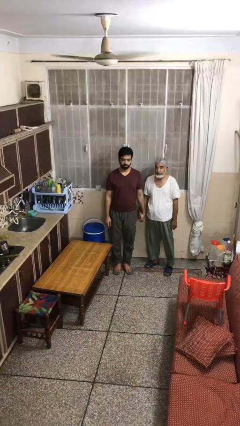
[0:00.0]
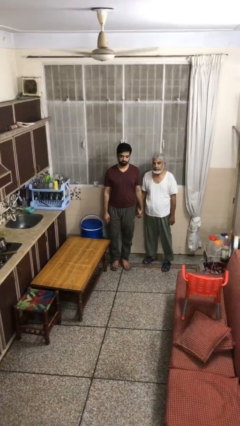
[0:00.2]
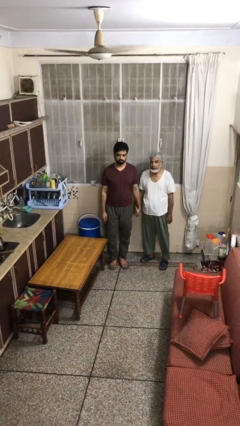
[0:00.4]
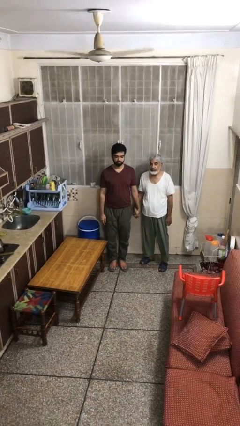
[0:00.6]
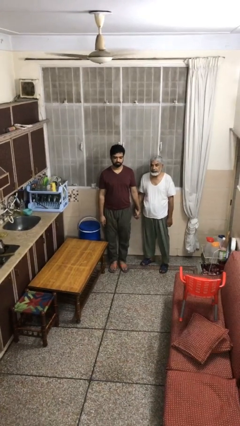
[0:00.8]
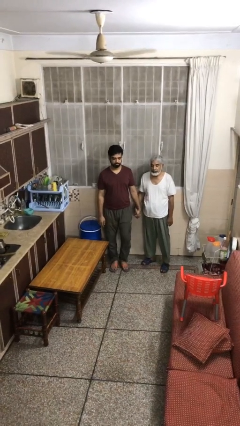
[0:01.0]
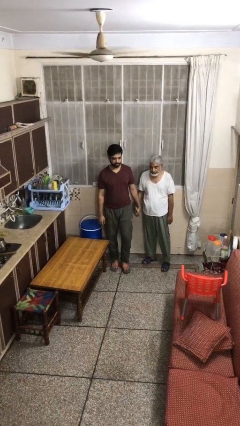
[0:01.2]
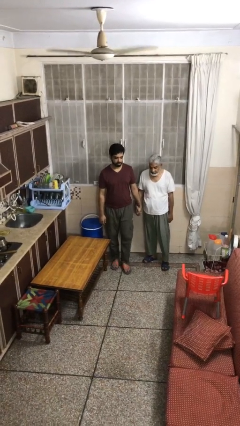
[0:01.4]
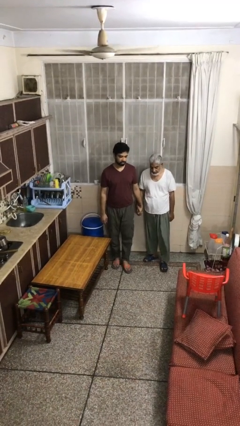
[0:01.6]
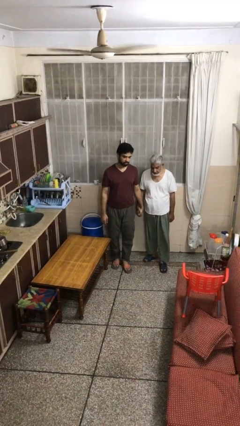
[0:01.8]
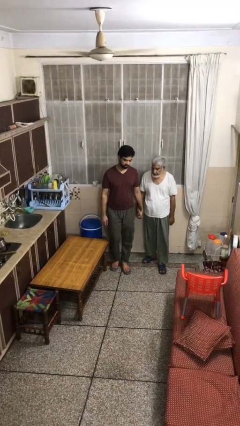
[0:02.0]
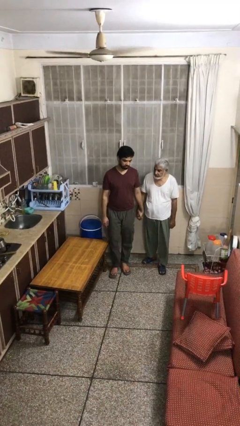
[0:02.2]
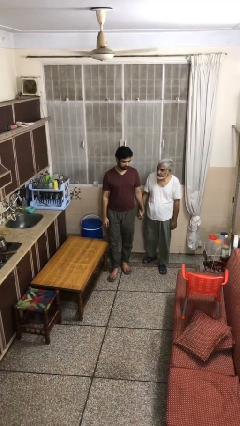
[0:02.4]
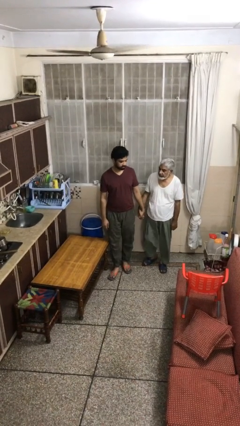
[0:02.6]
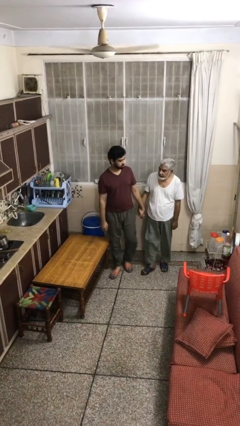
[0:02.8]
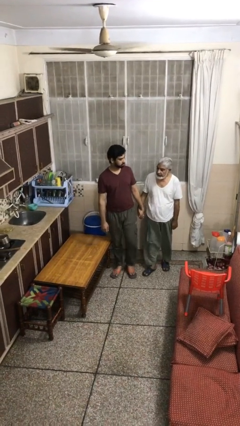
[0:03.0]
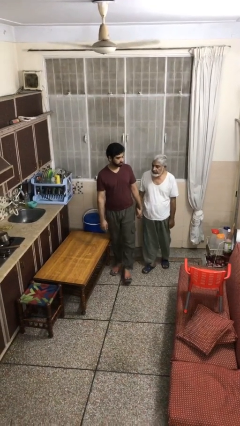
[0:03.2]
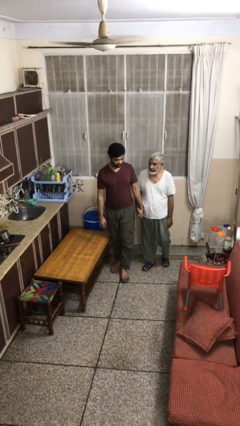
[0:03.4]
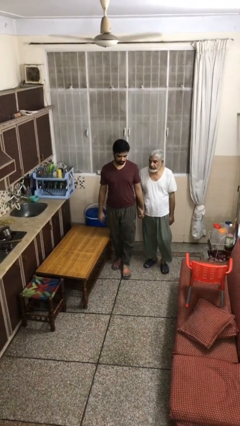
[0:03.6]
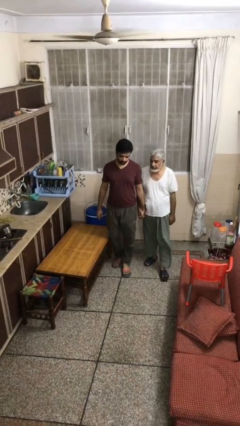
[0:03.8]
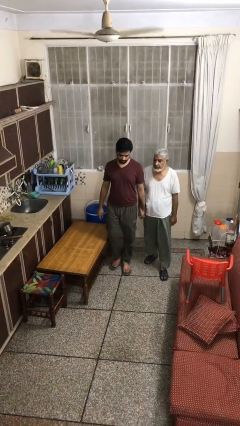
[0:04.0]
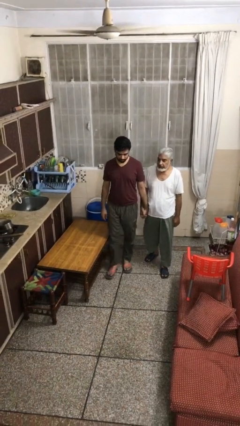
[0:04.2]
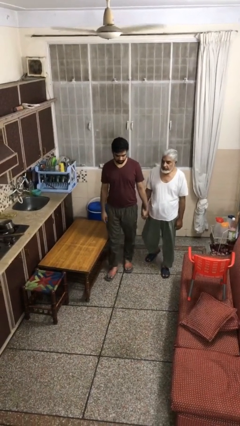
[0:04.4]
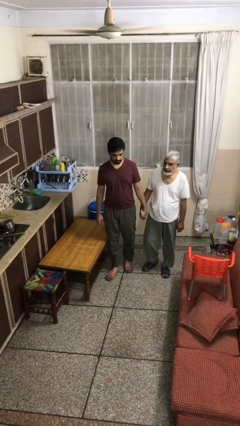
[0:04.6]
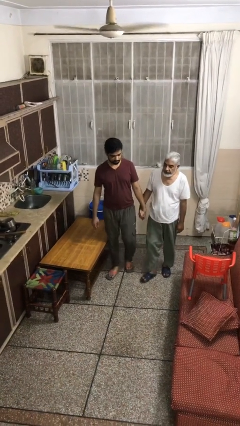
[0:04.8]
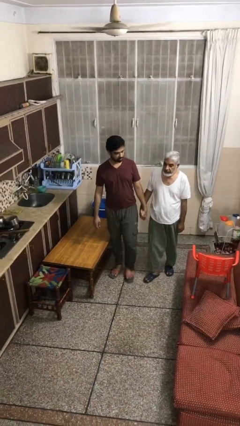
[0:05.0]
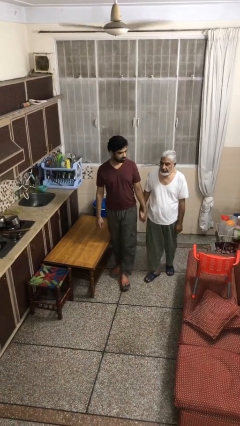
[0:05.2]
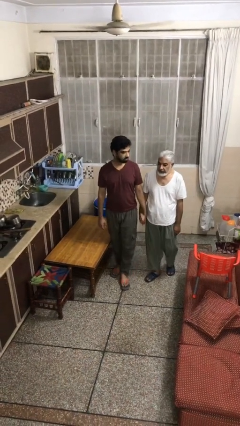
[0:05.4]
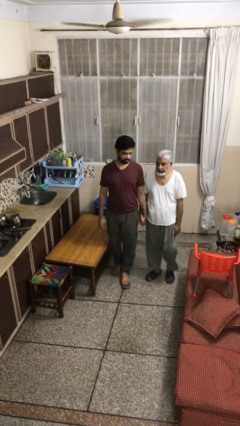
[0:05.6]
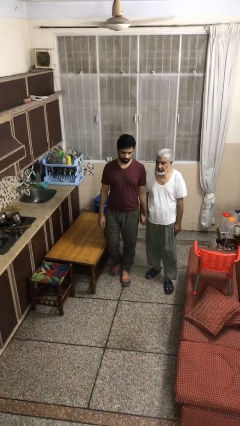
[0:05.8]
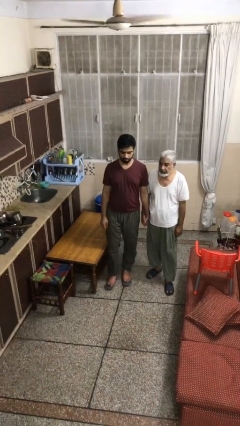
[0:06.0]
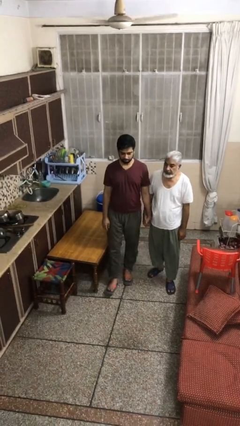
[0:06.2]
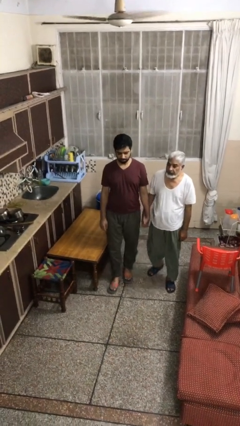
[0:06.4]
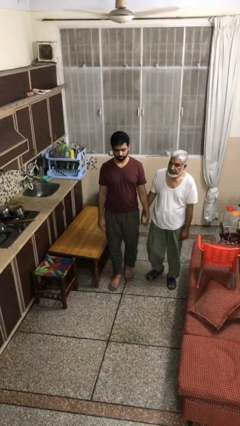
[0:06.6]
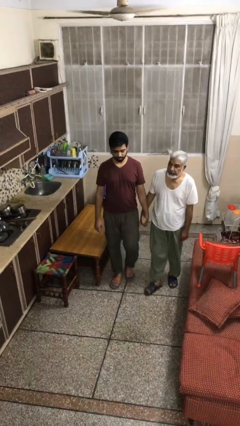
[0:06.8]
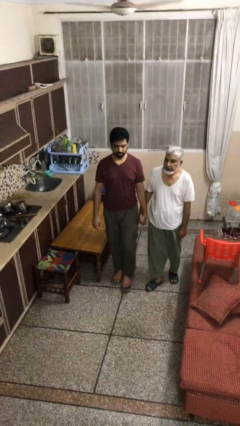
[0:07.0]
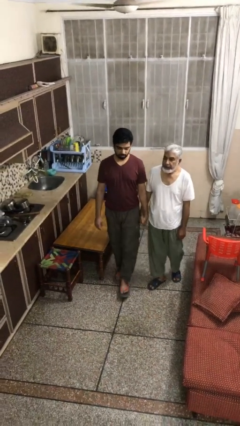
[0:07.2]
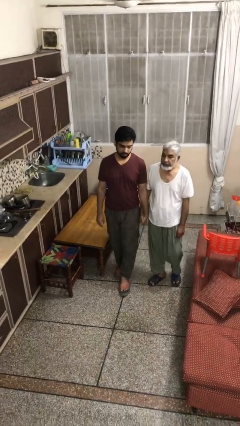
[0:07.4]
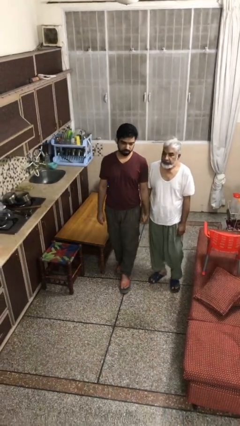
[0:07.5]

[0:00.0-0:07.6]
person holds hand

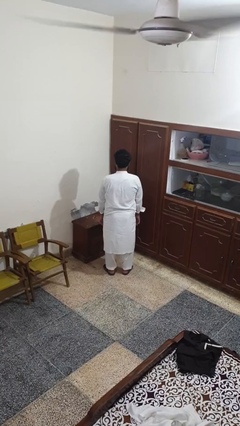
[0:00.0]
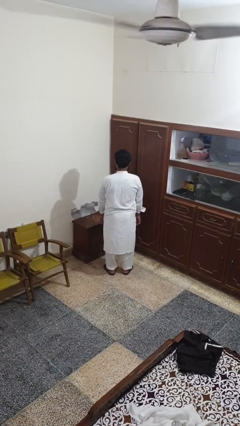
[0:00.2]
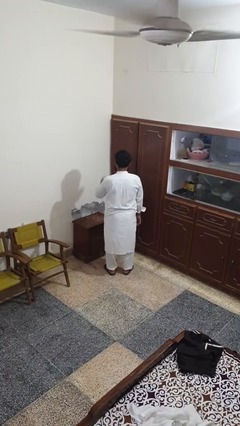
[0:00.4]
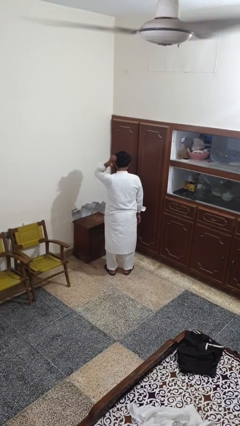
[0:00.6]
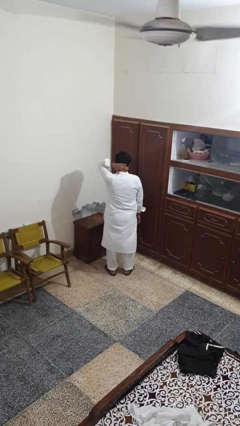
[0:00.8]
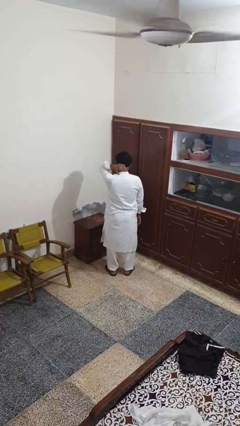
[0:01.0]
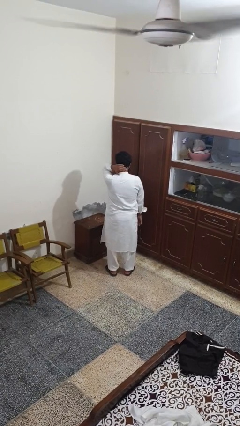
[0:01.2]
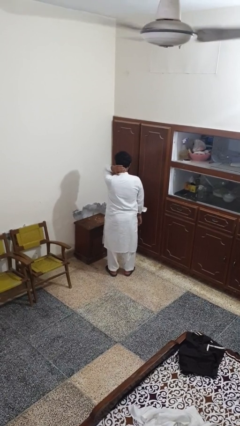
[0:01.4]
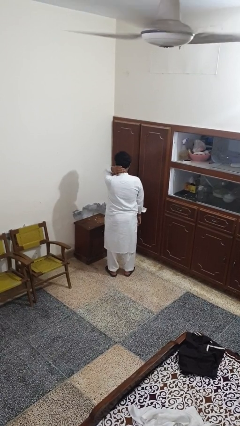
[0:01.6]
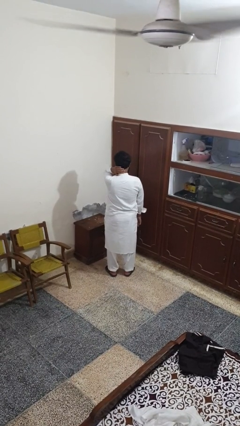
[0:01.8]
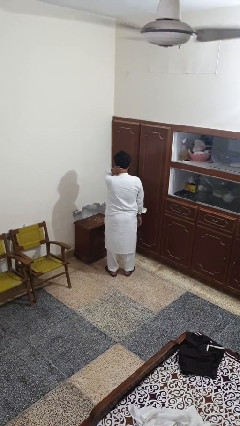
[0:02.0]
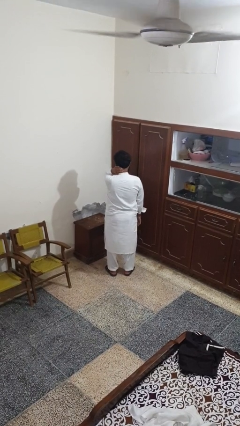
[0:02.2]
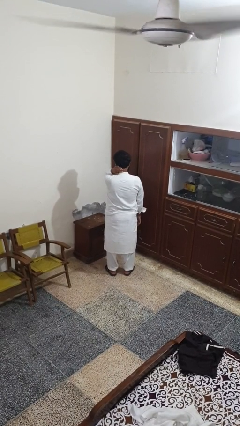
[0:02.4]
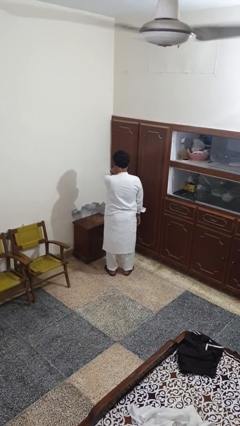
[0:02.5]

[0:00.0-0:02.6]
person rubs neck

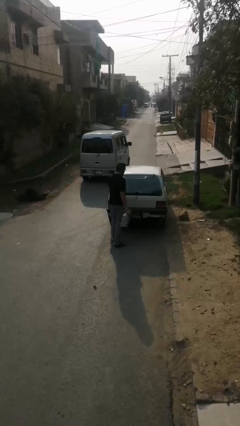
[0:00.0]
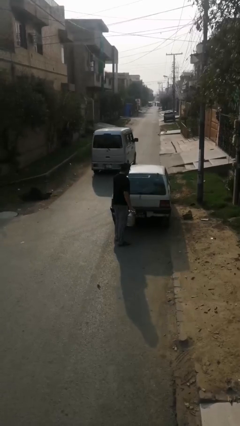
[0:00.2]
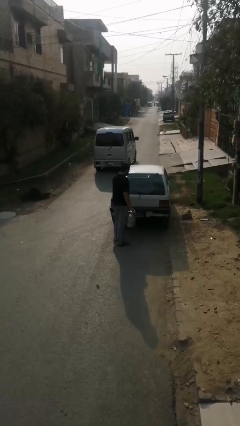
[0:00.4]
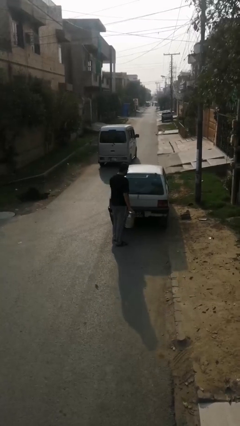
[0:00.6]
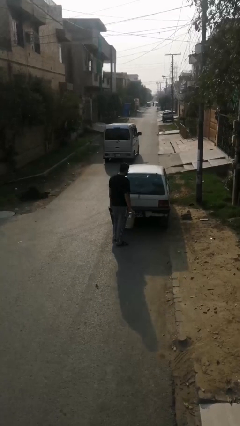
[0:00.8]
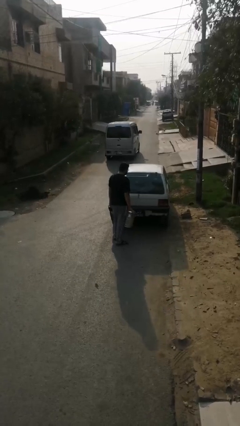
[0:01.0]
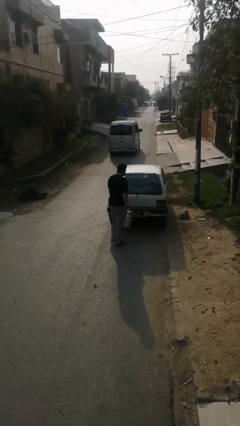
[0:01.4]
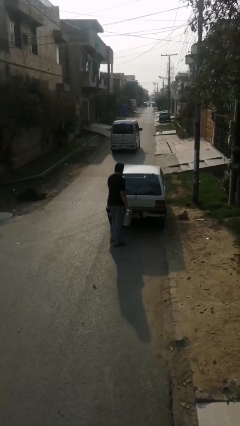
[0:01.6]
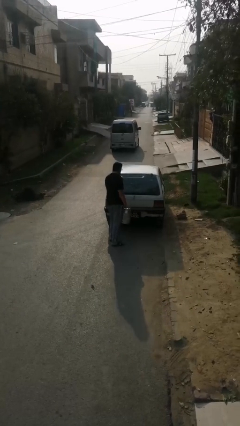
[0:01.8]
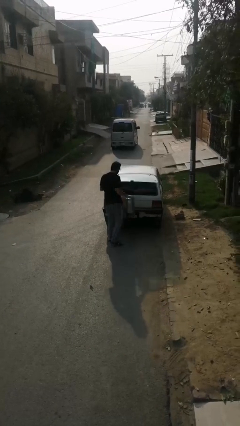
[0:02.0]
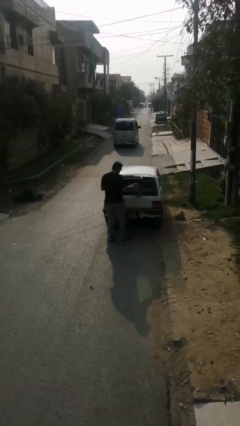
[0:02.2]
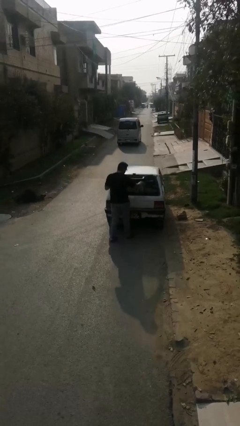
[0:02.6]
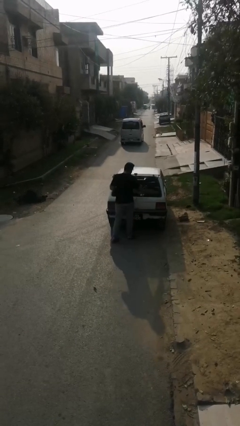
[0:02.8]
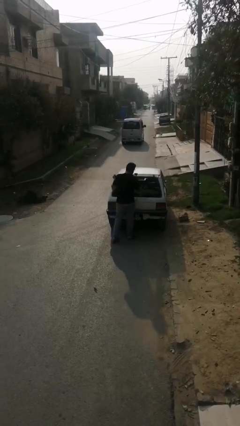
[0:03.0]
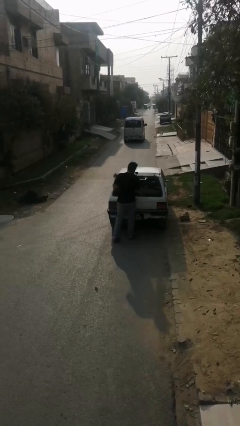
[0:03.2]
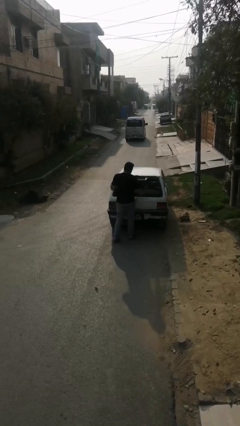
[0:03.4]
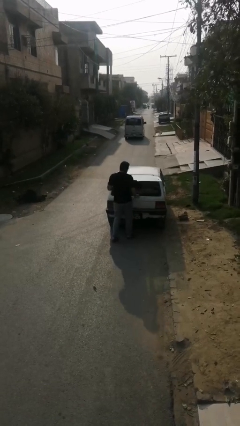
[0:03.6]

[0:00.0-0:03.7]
person unloads car

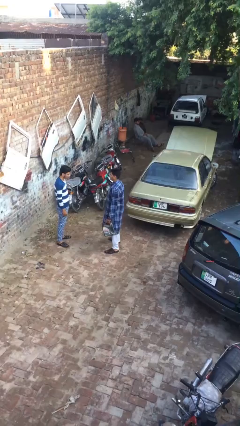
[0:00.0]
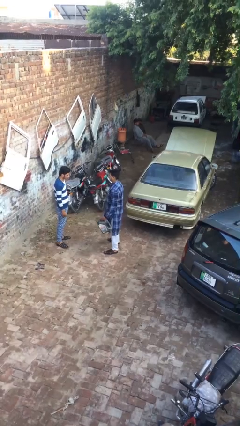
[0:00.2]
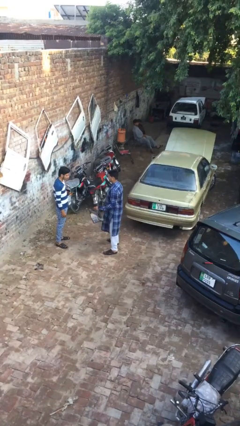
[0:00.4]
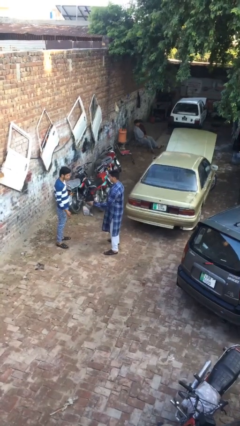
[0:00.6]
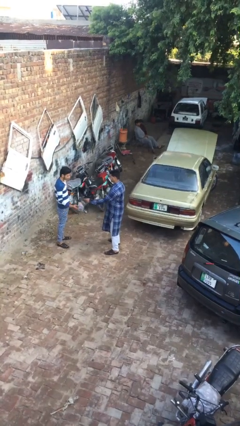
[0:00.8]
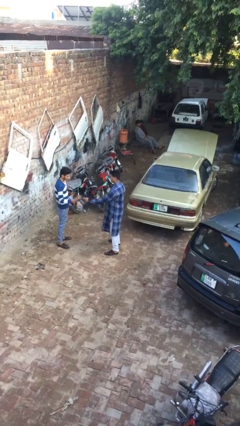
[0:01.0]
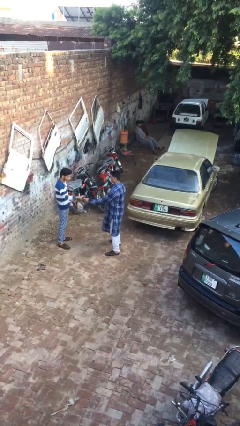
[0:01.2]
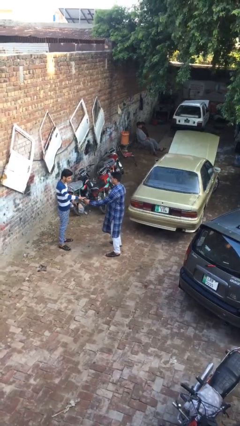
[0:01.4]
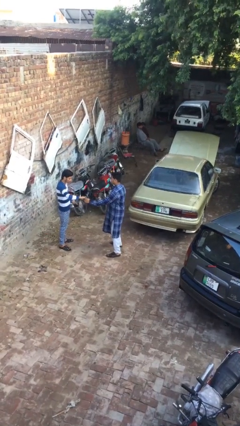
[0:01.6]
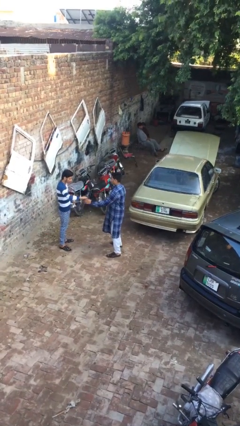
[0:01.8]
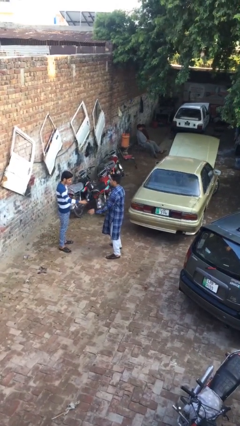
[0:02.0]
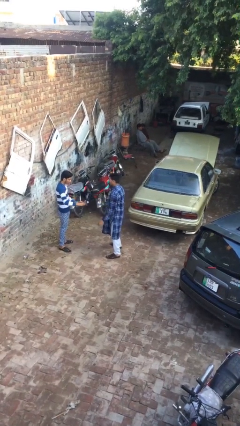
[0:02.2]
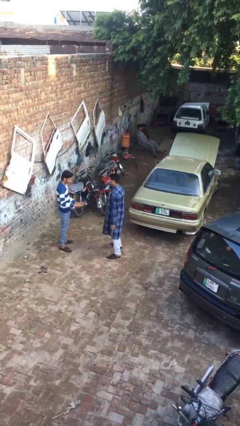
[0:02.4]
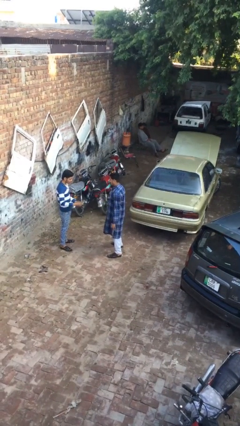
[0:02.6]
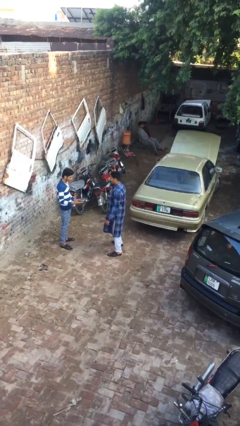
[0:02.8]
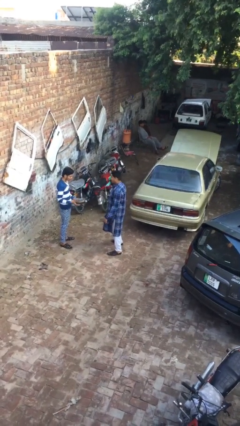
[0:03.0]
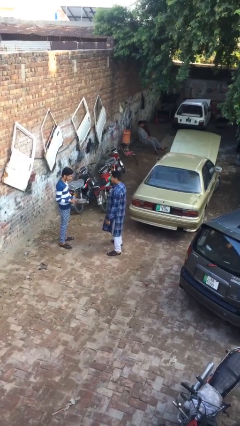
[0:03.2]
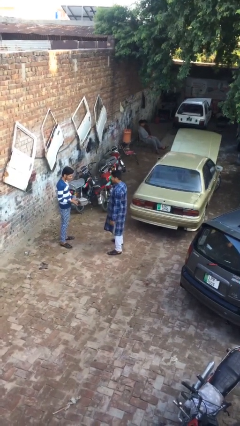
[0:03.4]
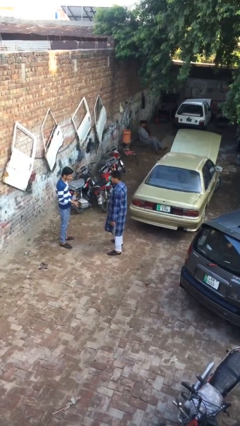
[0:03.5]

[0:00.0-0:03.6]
person transfers object to person

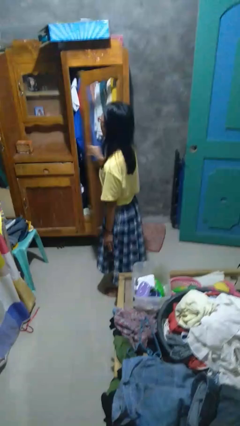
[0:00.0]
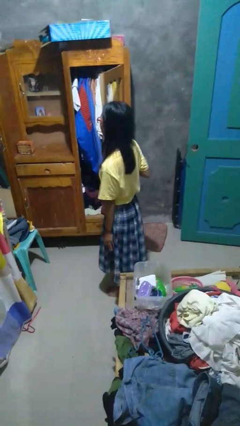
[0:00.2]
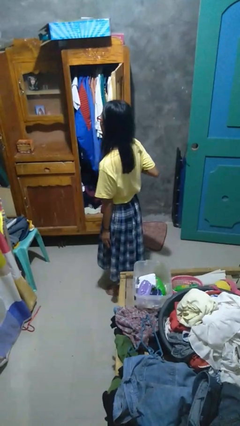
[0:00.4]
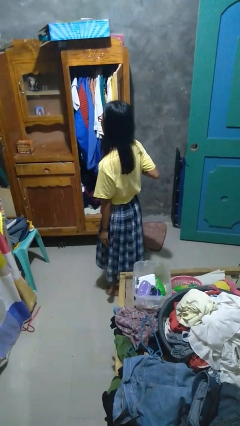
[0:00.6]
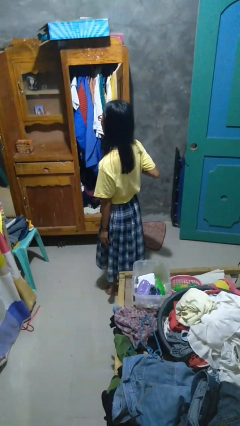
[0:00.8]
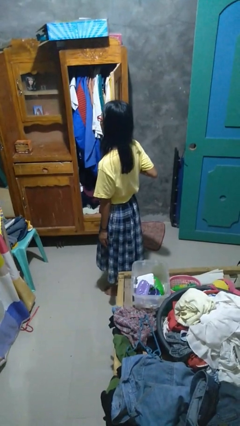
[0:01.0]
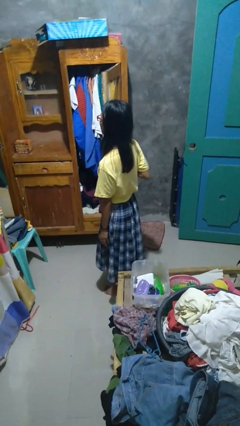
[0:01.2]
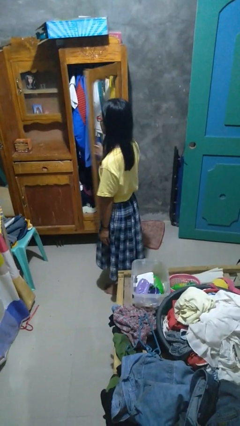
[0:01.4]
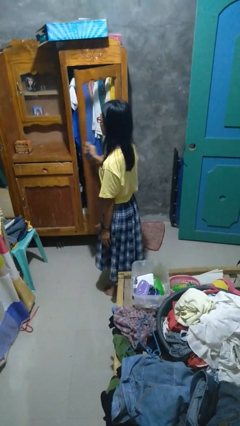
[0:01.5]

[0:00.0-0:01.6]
person opens closet door
